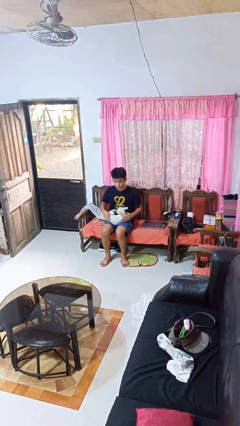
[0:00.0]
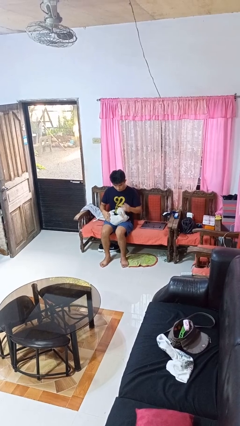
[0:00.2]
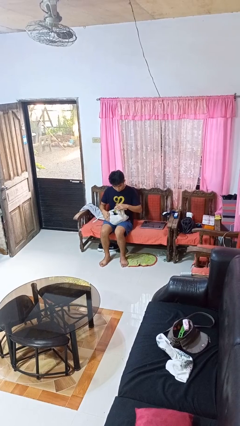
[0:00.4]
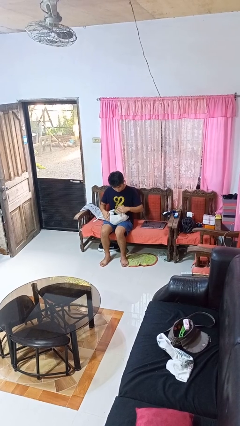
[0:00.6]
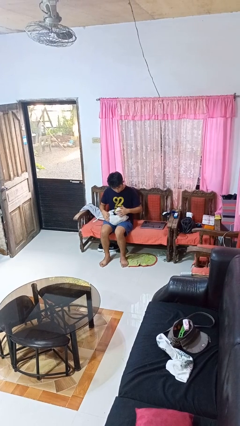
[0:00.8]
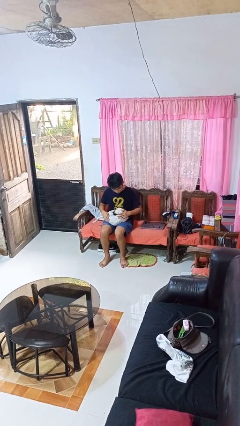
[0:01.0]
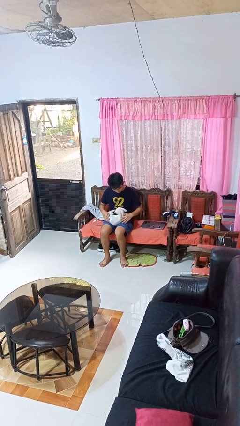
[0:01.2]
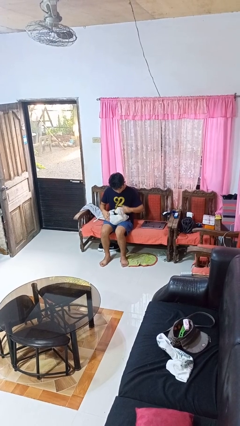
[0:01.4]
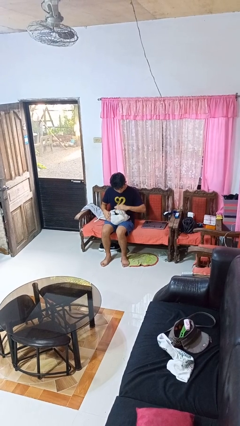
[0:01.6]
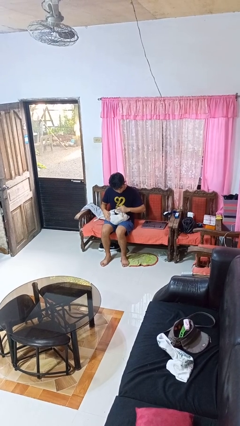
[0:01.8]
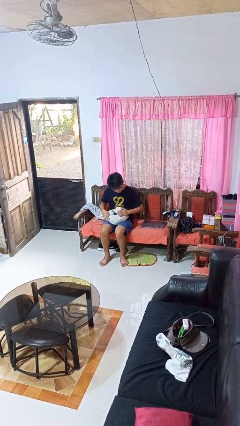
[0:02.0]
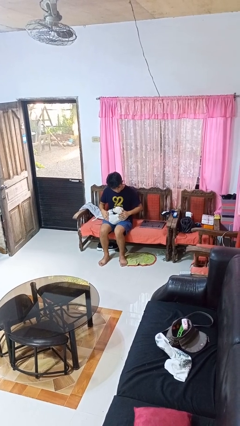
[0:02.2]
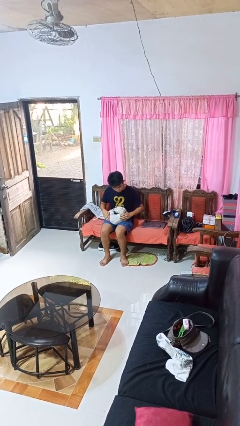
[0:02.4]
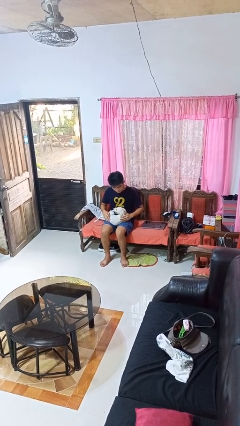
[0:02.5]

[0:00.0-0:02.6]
person pets dog

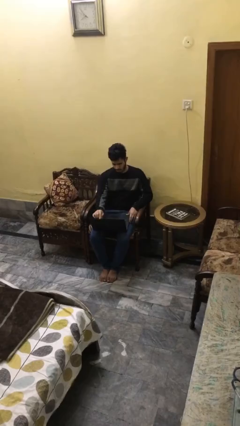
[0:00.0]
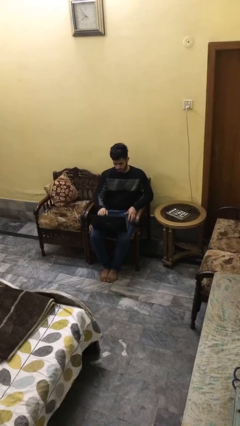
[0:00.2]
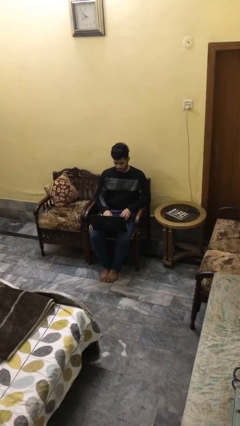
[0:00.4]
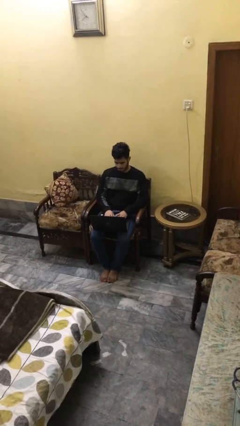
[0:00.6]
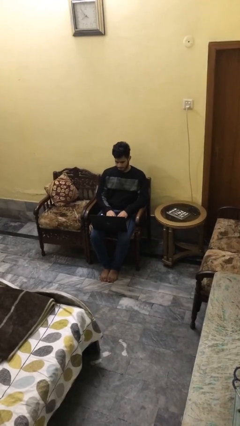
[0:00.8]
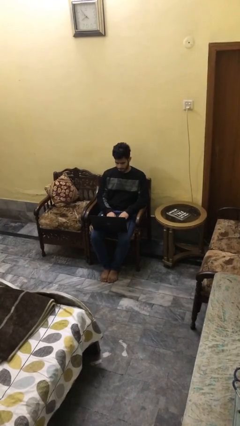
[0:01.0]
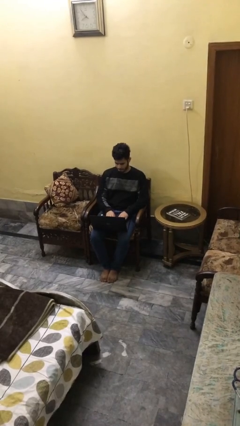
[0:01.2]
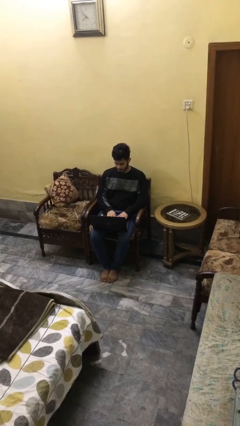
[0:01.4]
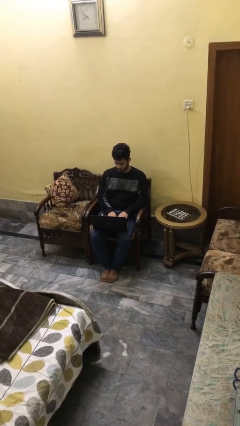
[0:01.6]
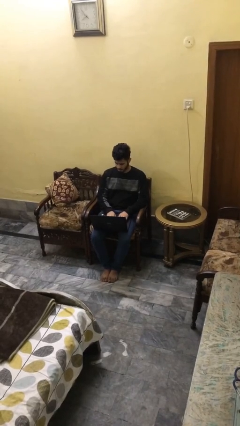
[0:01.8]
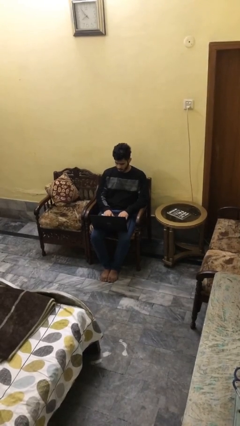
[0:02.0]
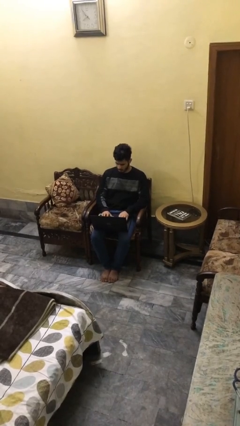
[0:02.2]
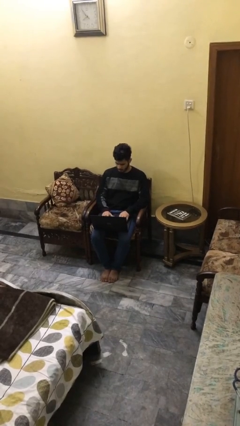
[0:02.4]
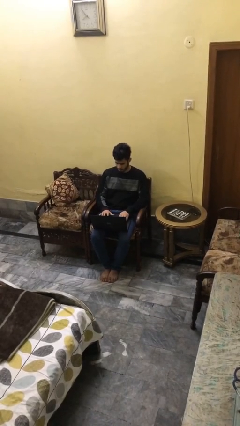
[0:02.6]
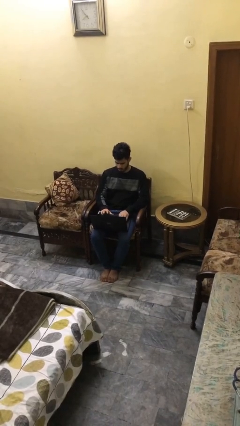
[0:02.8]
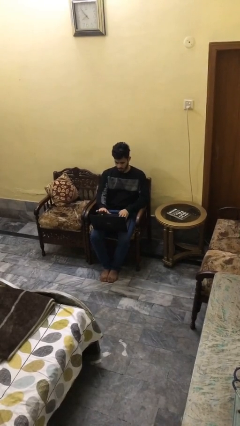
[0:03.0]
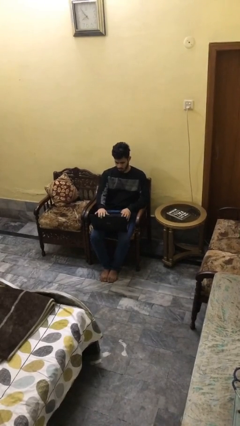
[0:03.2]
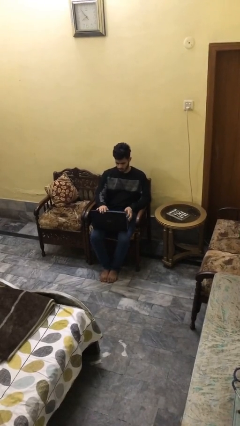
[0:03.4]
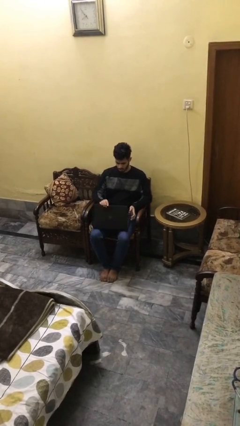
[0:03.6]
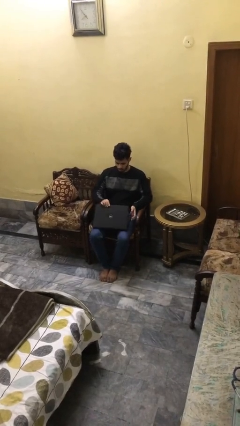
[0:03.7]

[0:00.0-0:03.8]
person interacts with laptop

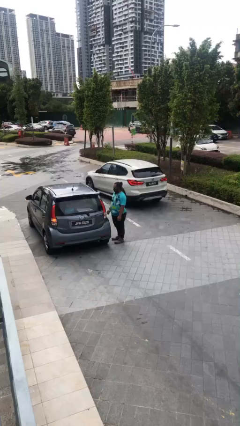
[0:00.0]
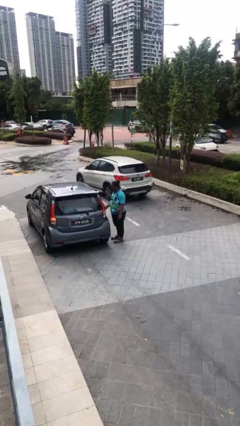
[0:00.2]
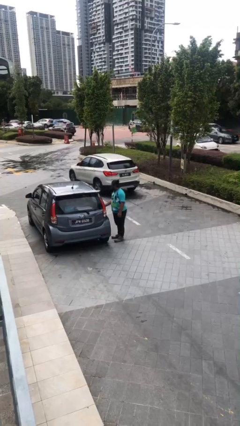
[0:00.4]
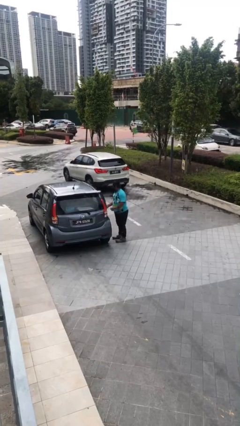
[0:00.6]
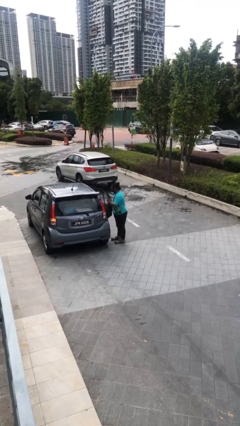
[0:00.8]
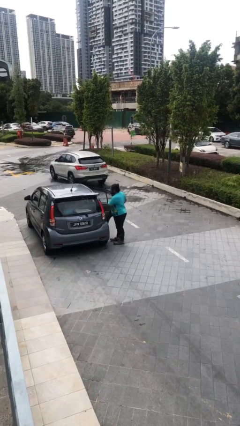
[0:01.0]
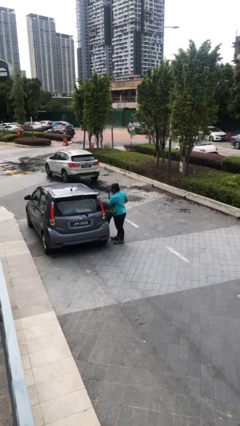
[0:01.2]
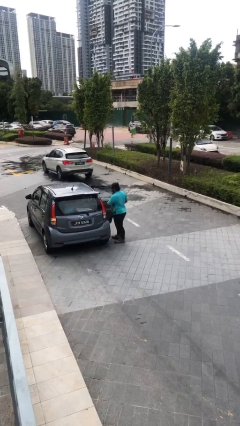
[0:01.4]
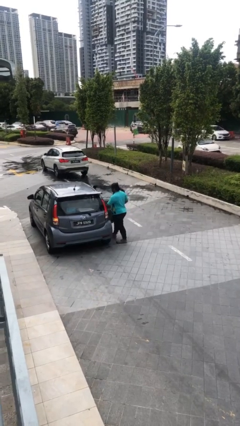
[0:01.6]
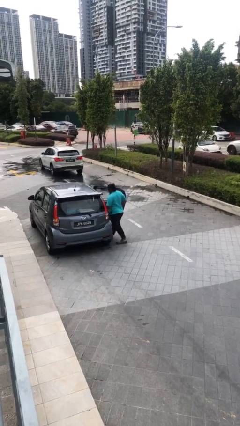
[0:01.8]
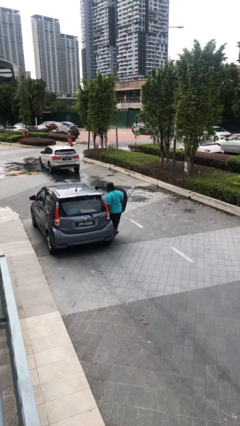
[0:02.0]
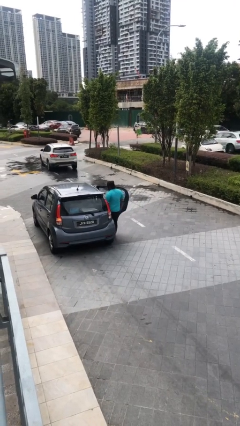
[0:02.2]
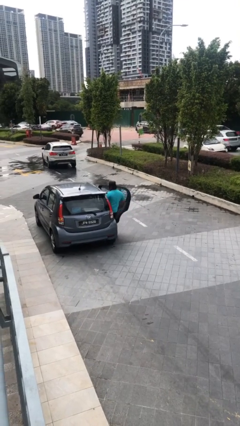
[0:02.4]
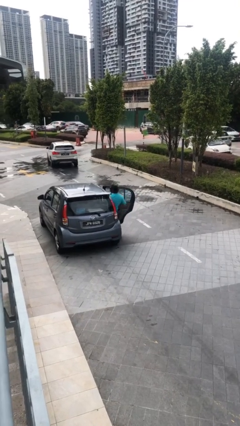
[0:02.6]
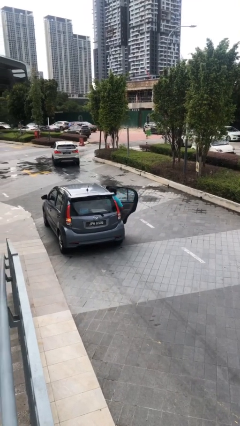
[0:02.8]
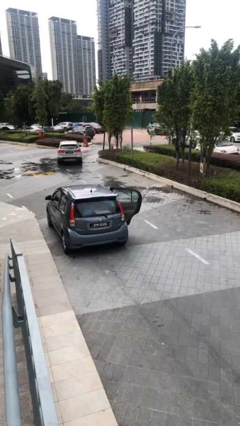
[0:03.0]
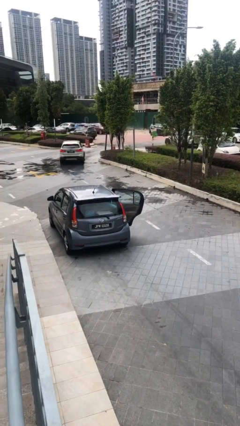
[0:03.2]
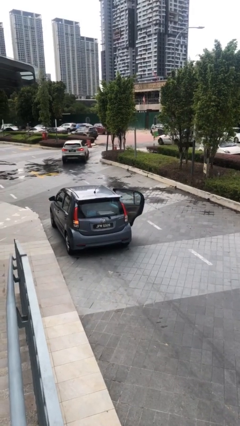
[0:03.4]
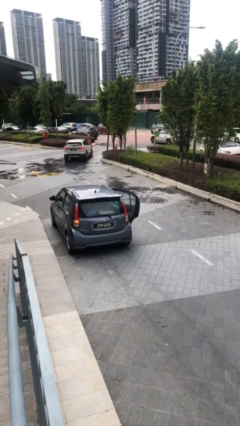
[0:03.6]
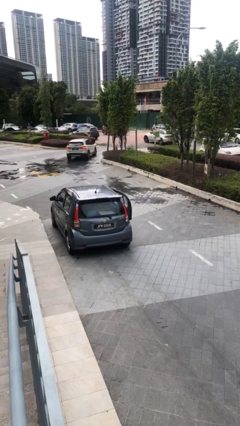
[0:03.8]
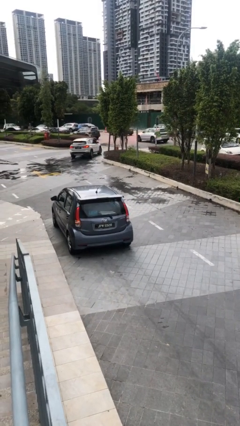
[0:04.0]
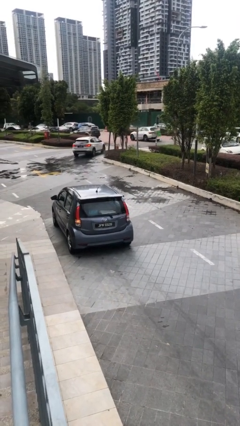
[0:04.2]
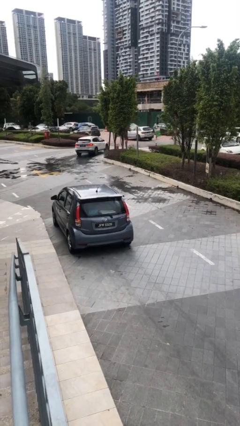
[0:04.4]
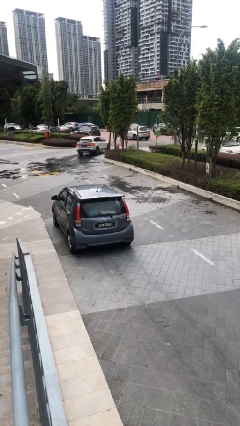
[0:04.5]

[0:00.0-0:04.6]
car picks up person

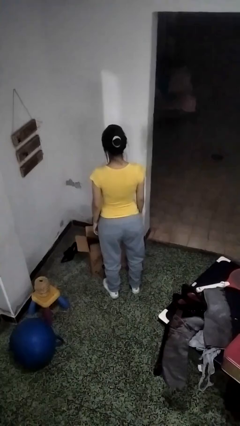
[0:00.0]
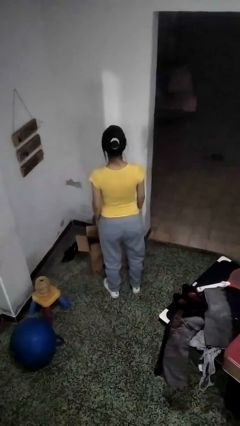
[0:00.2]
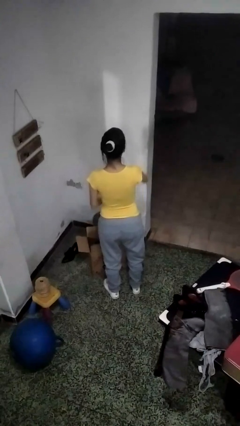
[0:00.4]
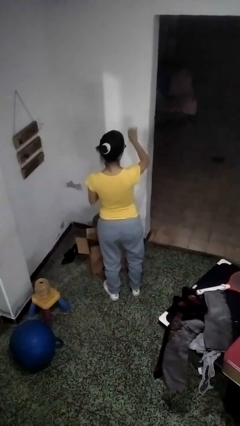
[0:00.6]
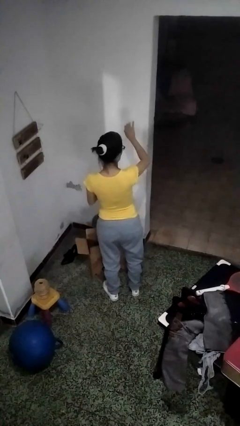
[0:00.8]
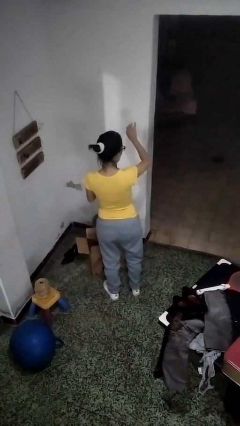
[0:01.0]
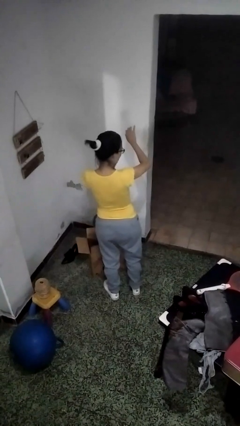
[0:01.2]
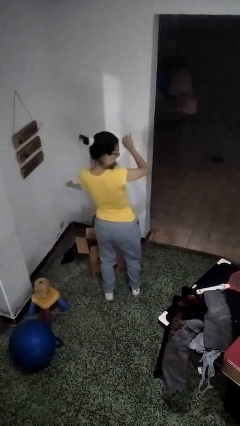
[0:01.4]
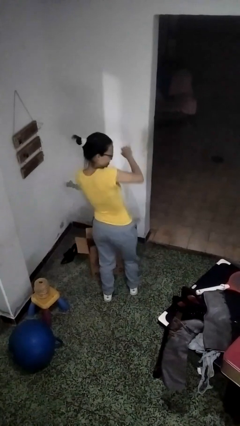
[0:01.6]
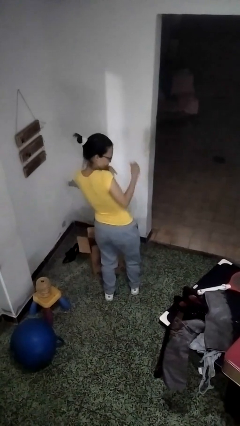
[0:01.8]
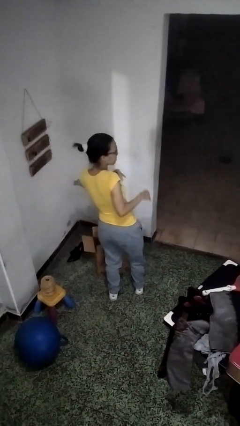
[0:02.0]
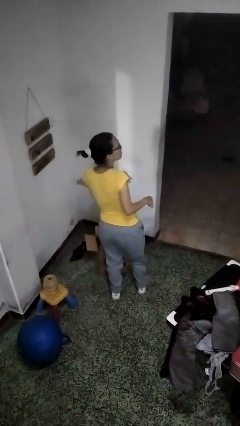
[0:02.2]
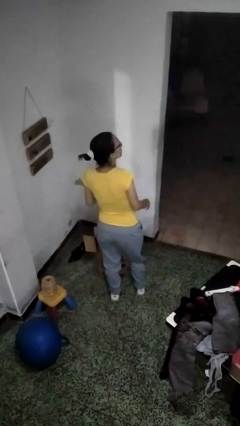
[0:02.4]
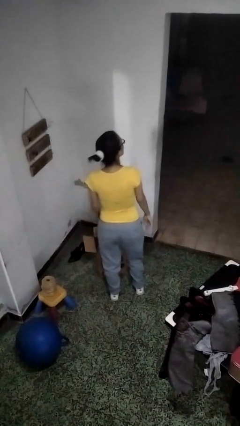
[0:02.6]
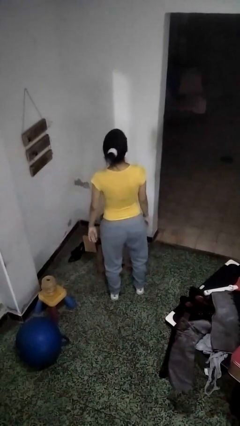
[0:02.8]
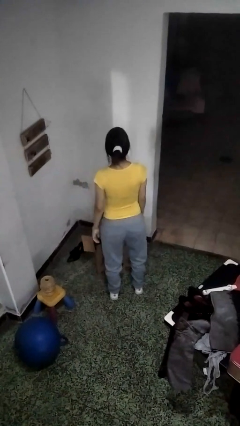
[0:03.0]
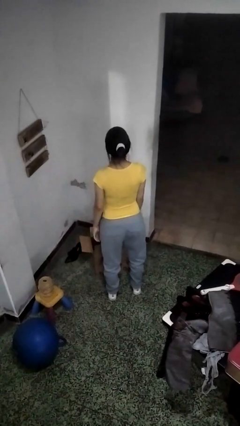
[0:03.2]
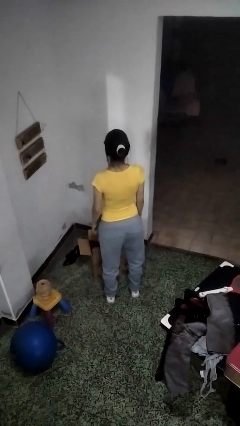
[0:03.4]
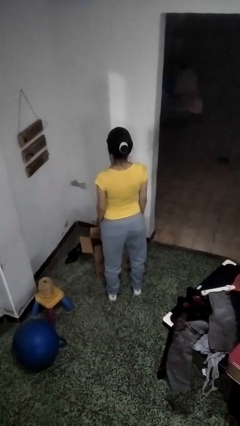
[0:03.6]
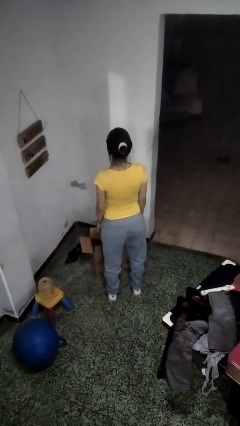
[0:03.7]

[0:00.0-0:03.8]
person swats bug

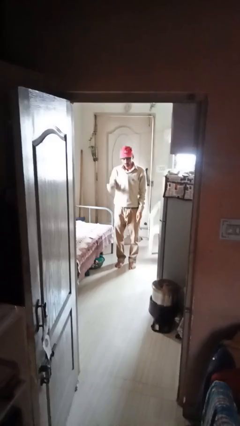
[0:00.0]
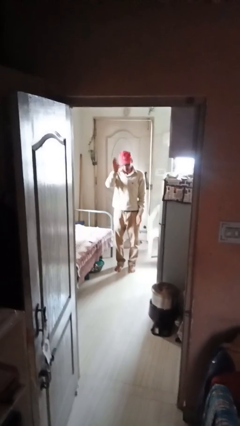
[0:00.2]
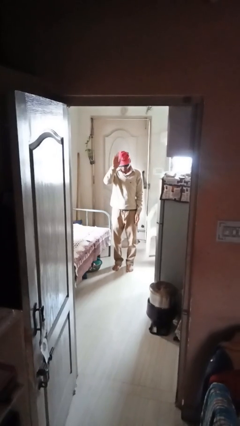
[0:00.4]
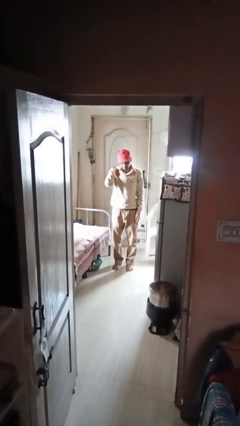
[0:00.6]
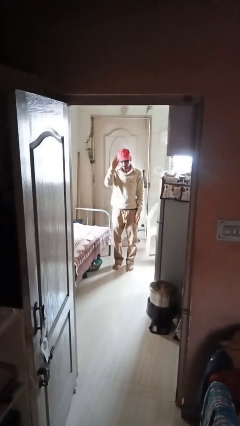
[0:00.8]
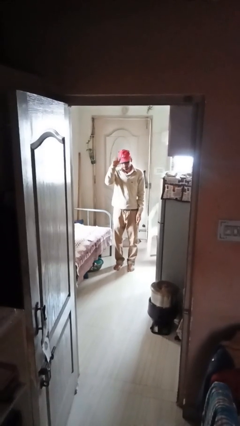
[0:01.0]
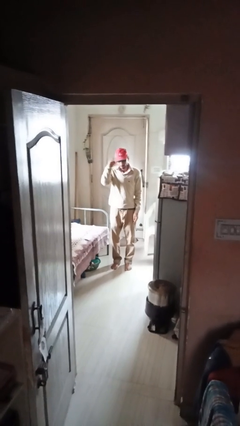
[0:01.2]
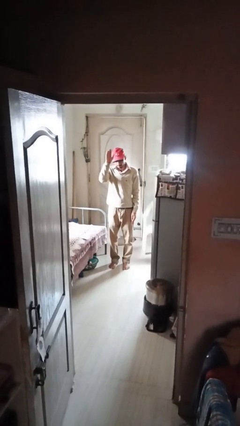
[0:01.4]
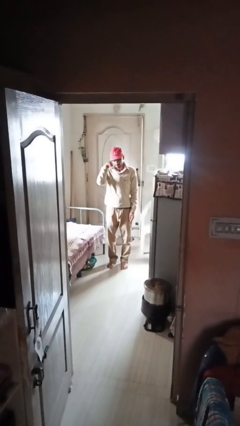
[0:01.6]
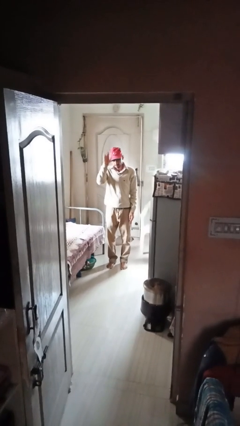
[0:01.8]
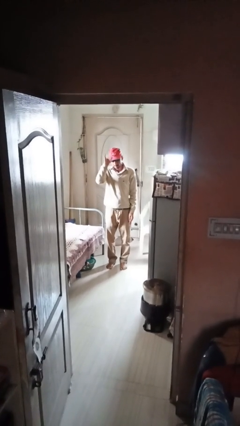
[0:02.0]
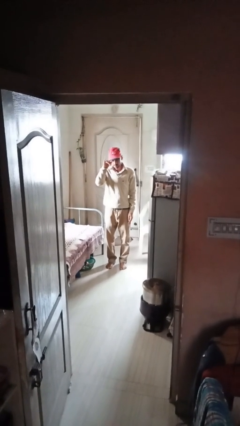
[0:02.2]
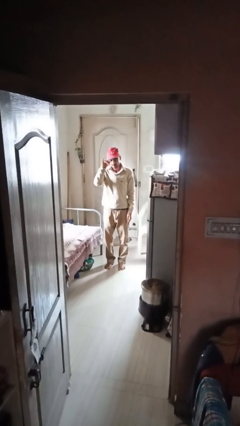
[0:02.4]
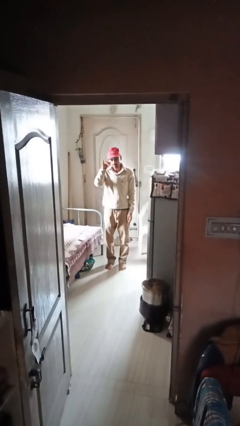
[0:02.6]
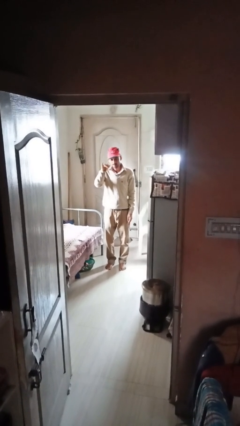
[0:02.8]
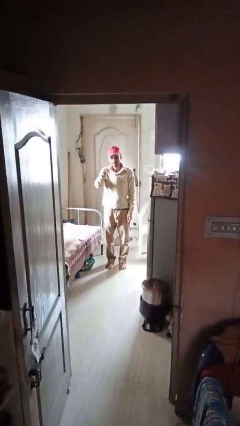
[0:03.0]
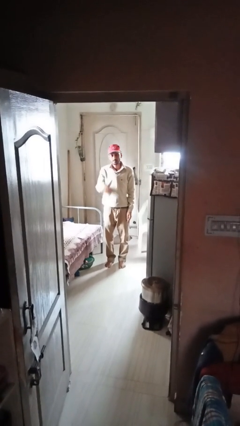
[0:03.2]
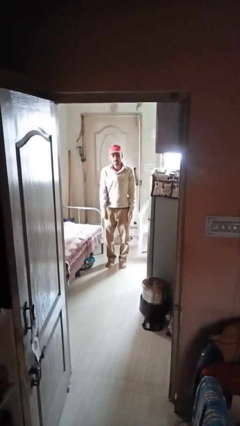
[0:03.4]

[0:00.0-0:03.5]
person gestures come here
